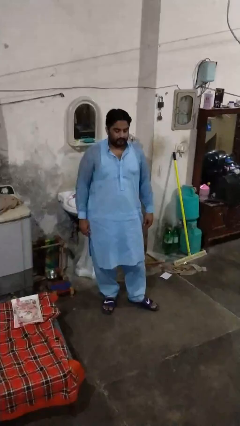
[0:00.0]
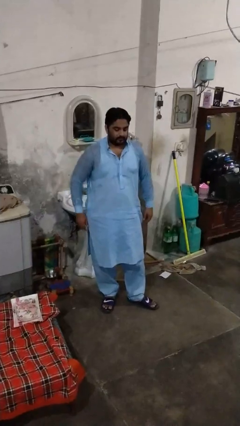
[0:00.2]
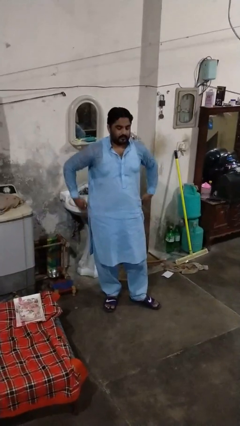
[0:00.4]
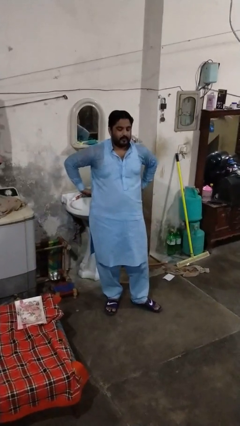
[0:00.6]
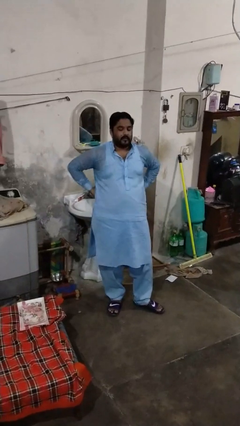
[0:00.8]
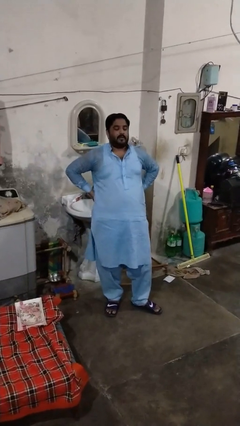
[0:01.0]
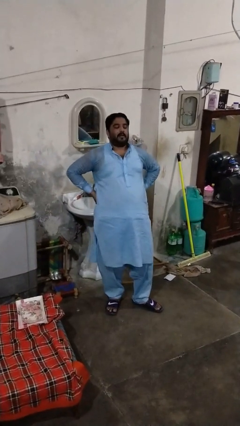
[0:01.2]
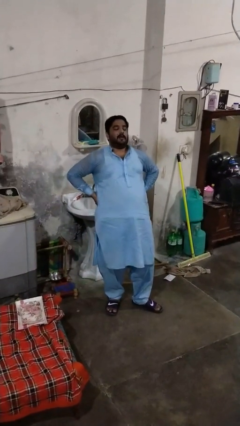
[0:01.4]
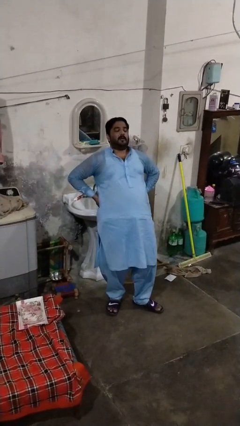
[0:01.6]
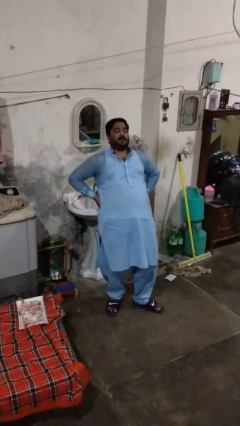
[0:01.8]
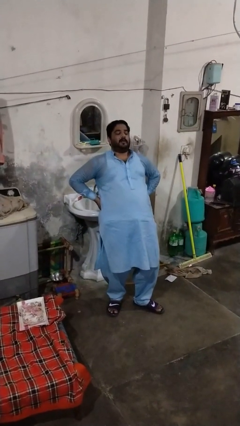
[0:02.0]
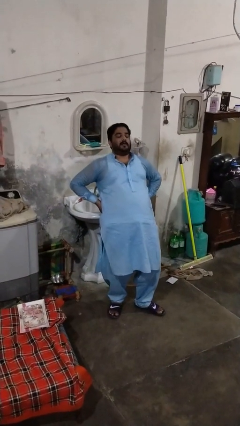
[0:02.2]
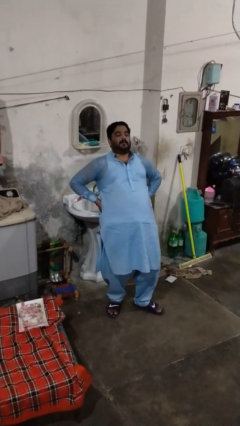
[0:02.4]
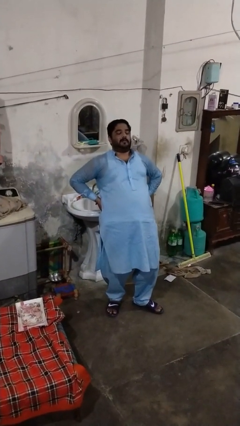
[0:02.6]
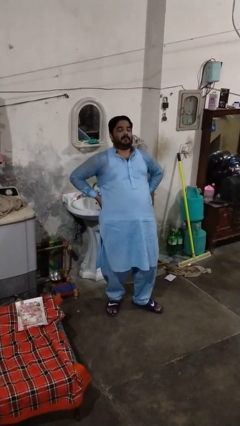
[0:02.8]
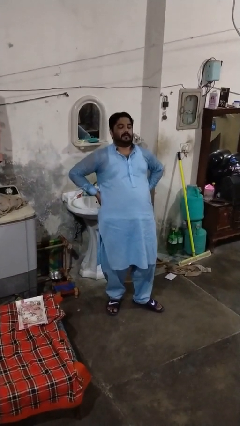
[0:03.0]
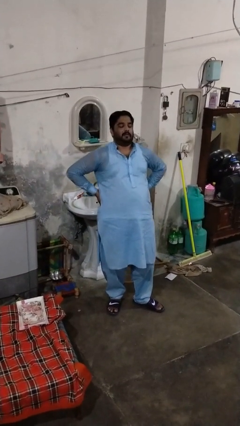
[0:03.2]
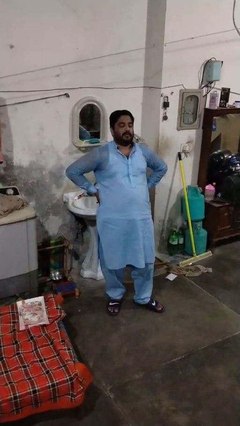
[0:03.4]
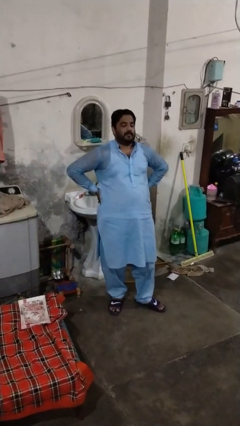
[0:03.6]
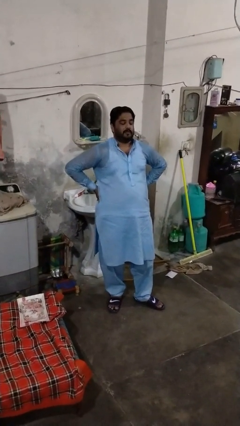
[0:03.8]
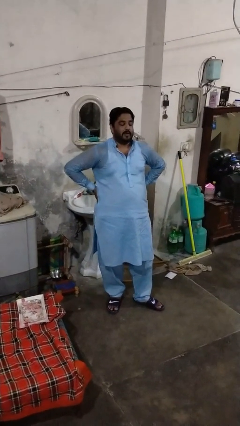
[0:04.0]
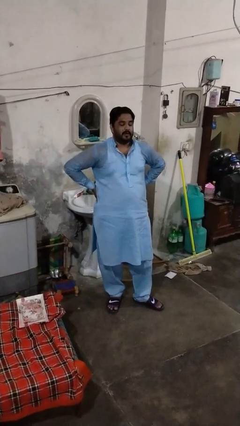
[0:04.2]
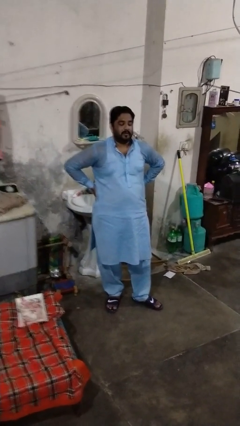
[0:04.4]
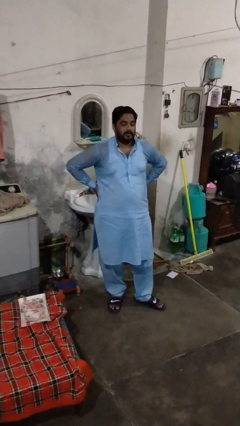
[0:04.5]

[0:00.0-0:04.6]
person stretches back

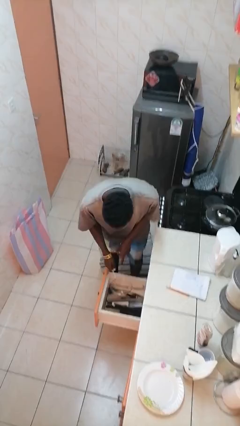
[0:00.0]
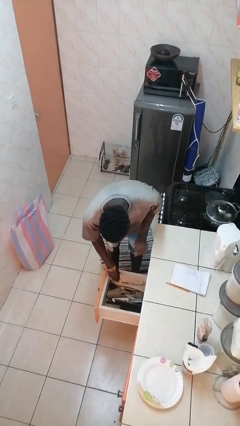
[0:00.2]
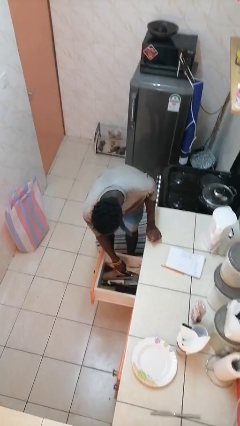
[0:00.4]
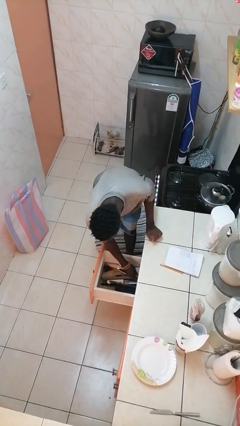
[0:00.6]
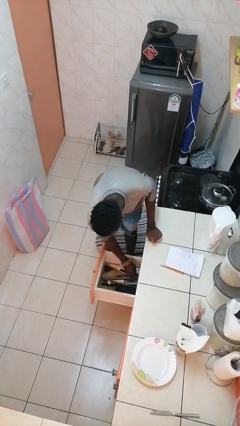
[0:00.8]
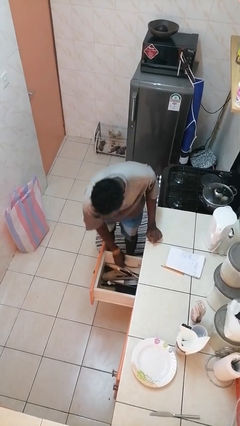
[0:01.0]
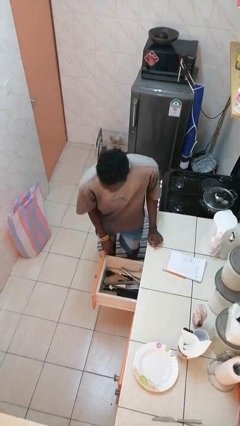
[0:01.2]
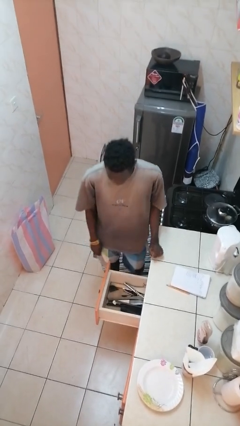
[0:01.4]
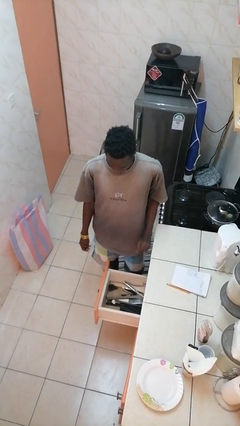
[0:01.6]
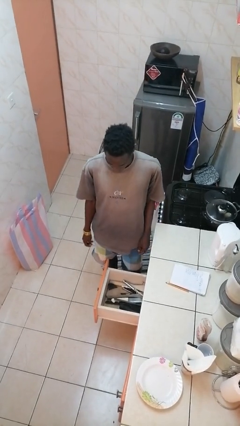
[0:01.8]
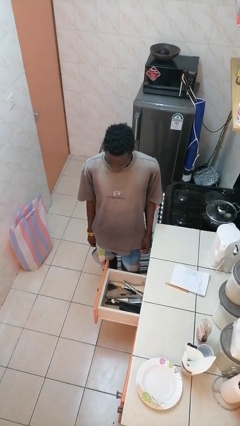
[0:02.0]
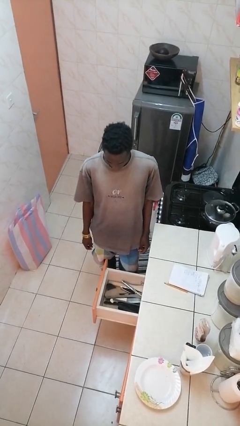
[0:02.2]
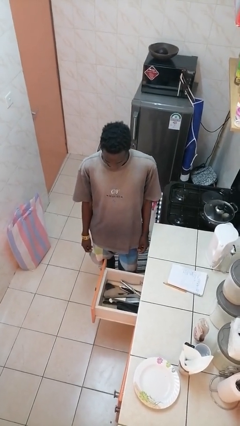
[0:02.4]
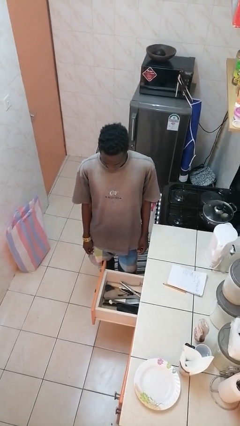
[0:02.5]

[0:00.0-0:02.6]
person puts object into kitchen drawer

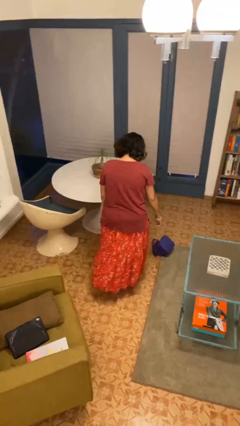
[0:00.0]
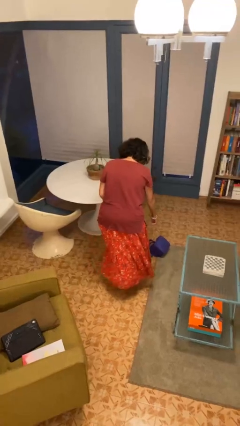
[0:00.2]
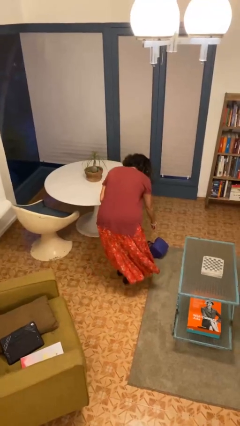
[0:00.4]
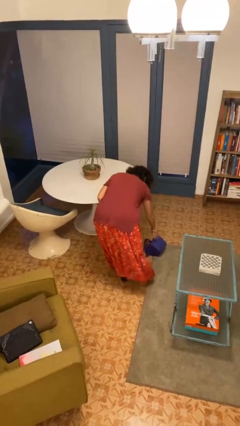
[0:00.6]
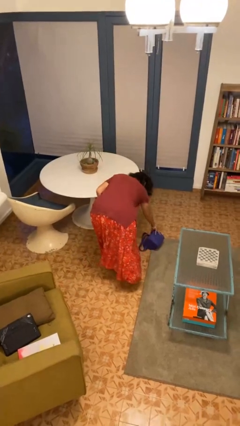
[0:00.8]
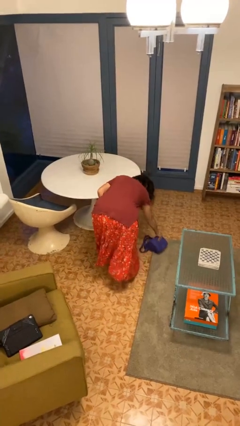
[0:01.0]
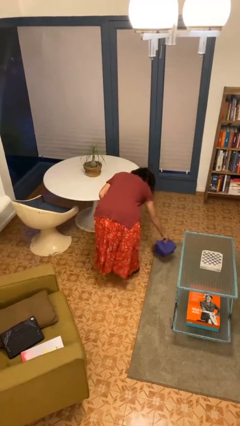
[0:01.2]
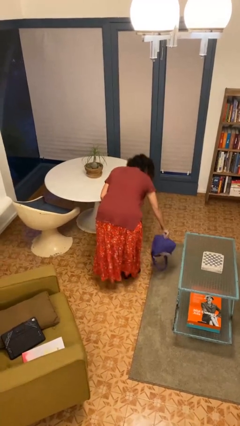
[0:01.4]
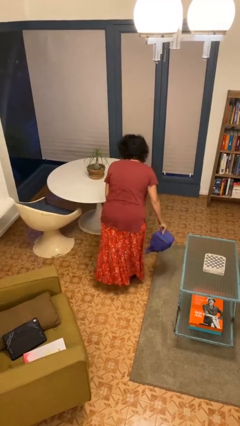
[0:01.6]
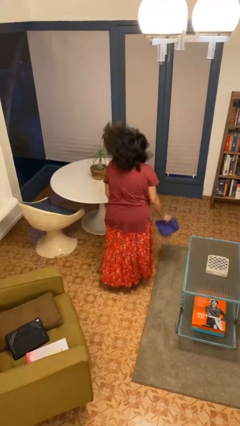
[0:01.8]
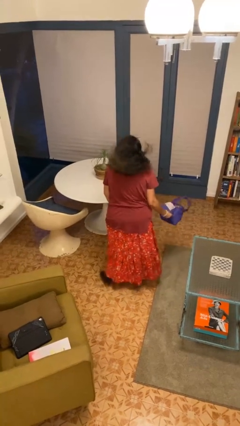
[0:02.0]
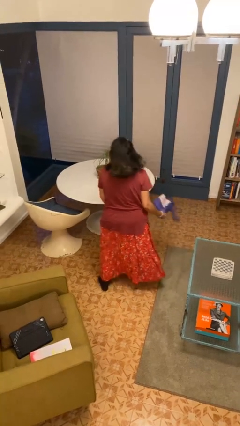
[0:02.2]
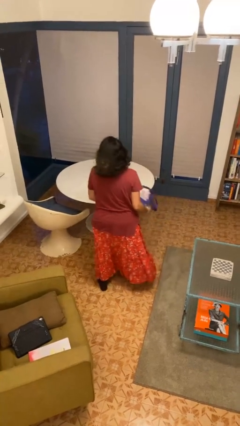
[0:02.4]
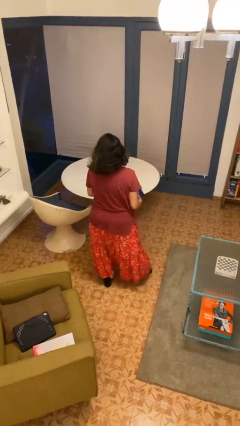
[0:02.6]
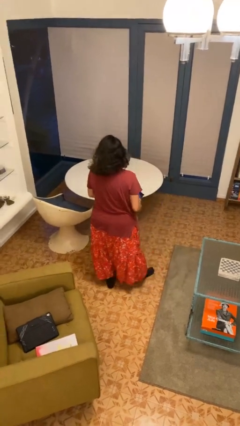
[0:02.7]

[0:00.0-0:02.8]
person picks up object from floor

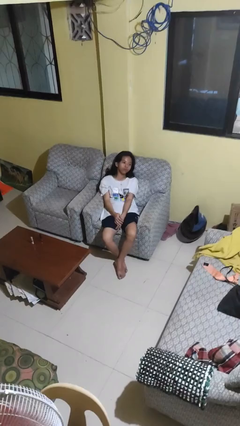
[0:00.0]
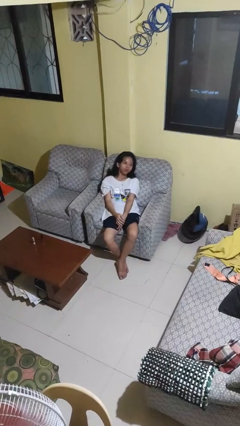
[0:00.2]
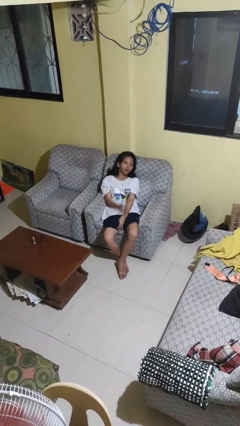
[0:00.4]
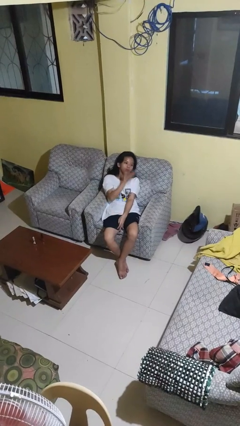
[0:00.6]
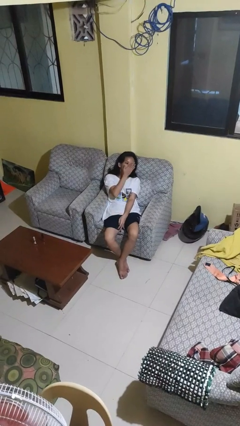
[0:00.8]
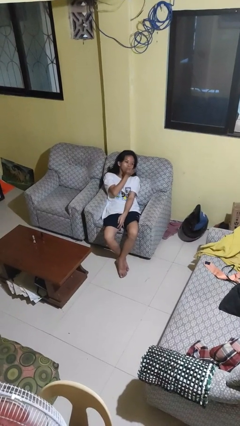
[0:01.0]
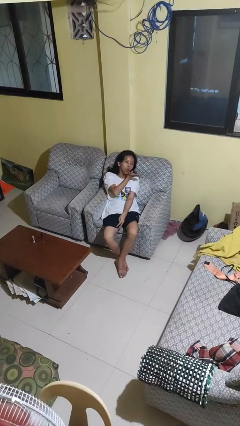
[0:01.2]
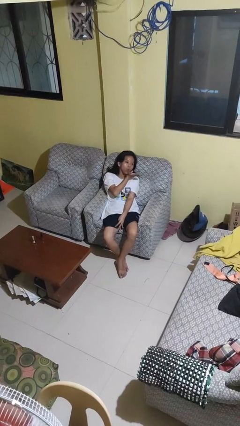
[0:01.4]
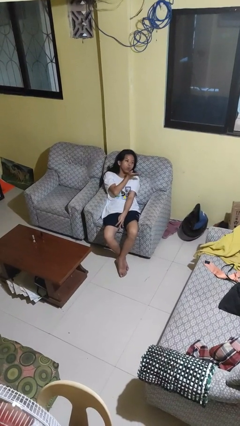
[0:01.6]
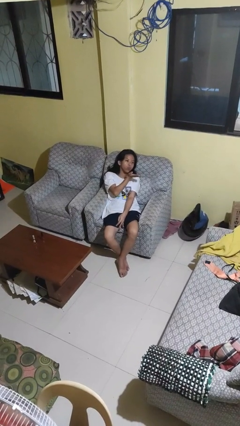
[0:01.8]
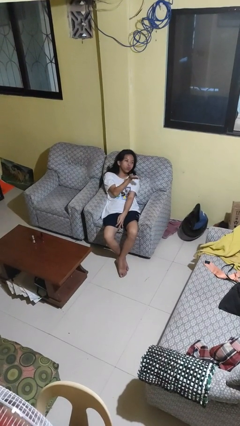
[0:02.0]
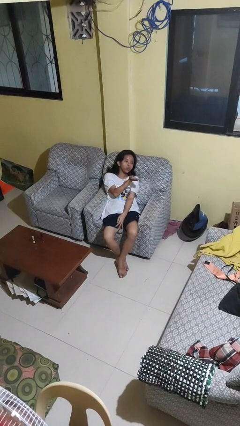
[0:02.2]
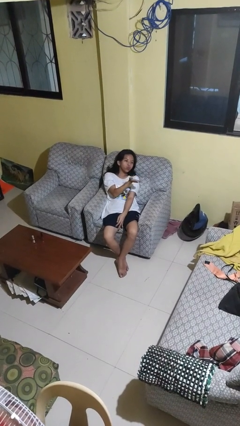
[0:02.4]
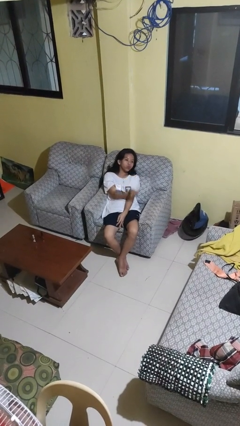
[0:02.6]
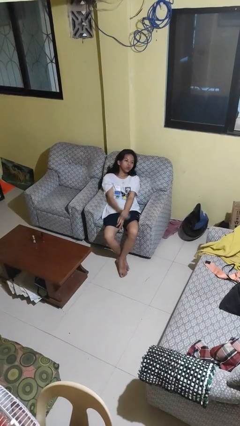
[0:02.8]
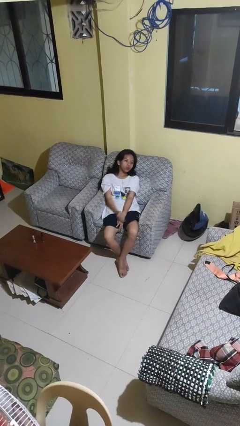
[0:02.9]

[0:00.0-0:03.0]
person gestures blow kiss

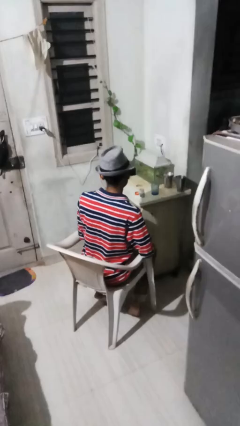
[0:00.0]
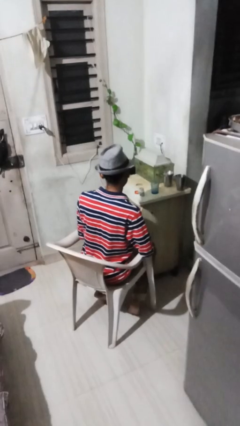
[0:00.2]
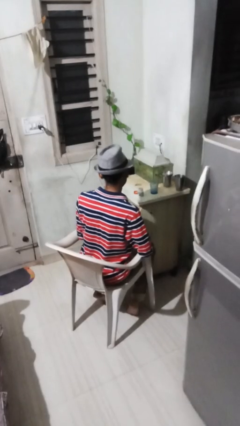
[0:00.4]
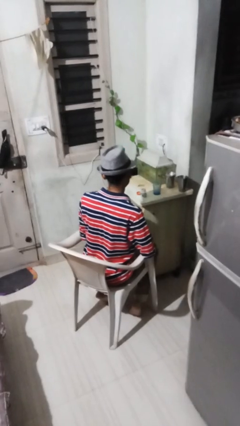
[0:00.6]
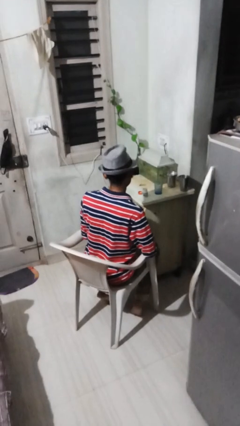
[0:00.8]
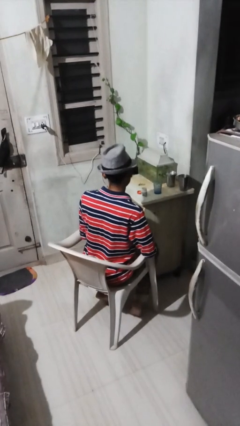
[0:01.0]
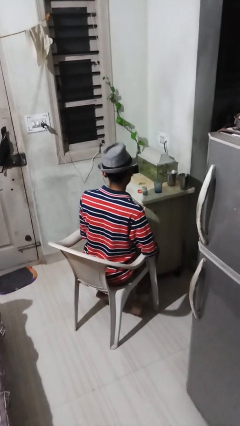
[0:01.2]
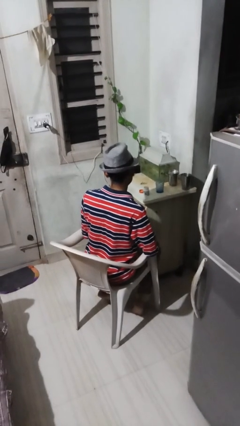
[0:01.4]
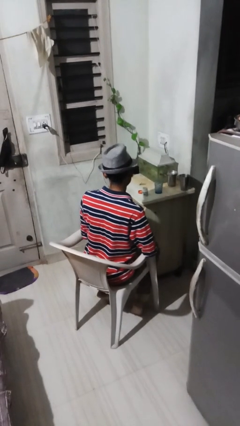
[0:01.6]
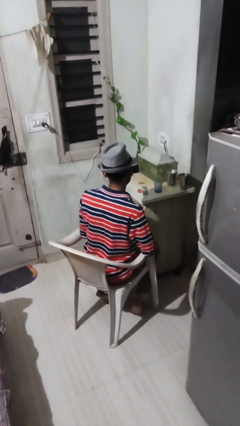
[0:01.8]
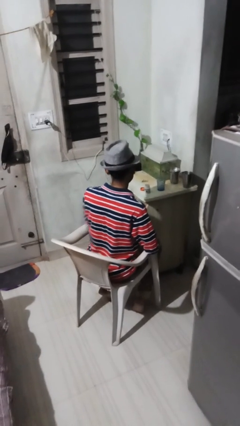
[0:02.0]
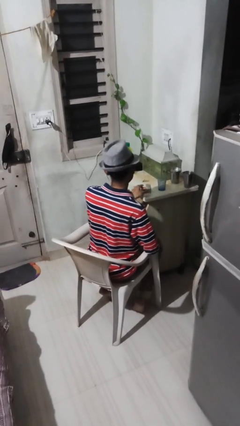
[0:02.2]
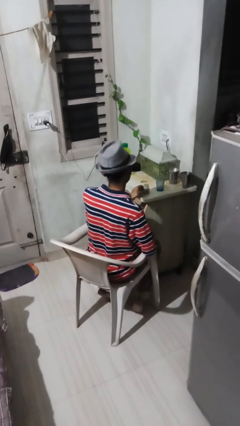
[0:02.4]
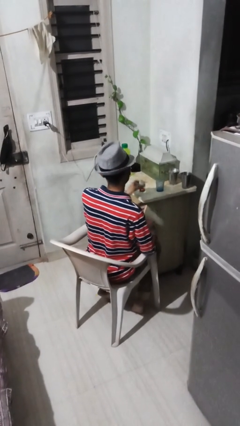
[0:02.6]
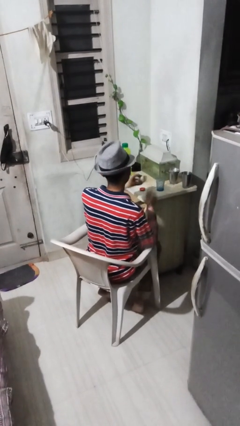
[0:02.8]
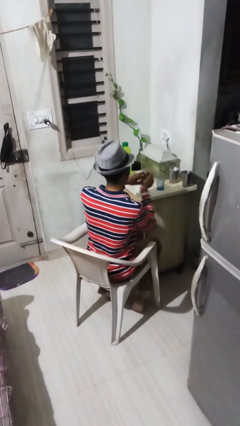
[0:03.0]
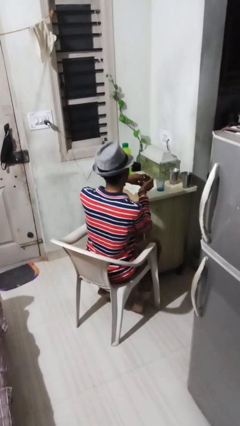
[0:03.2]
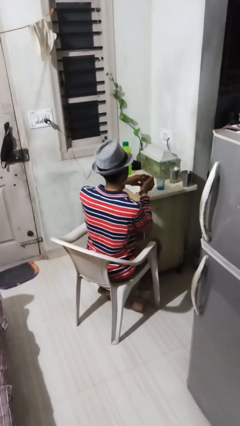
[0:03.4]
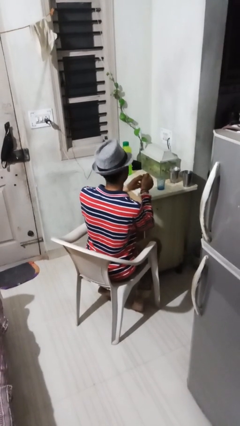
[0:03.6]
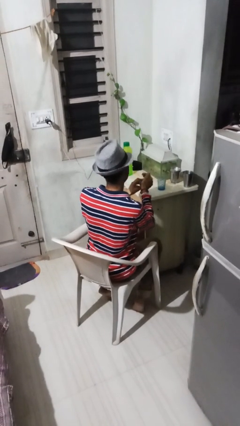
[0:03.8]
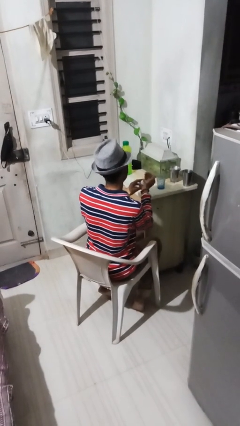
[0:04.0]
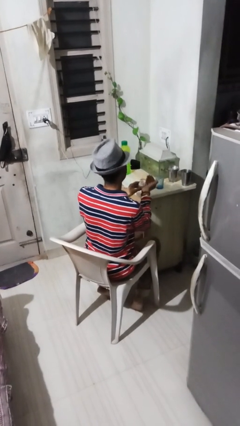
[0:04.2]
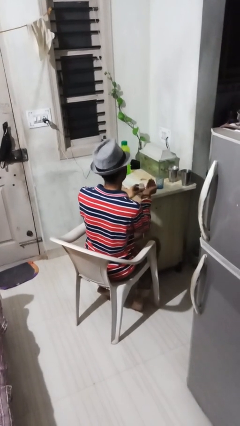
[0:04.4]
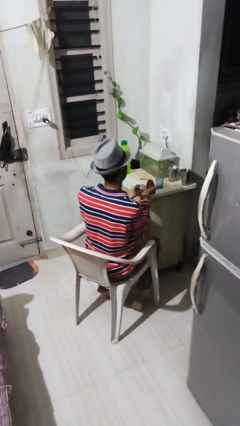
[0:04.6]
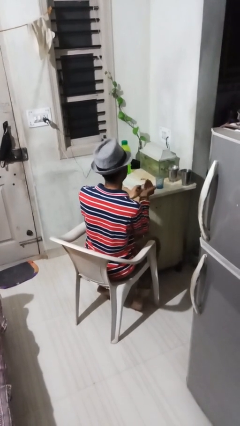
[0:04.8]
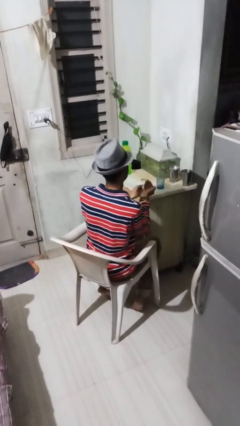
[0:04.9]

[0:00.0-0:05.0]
person takes medicine pills
